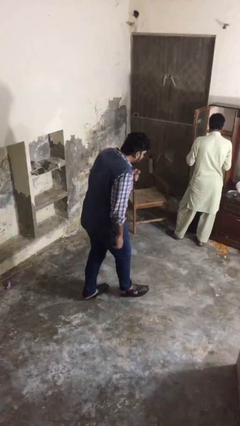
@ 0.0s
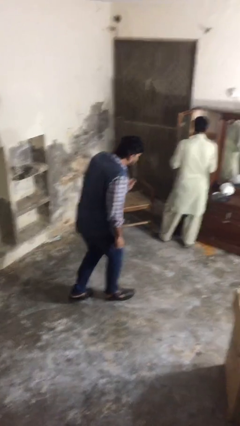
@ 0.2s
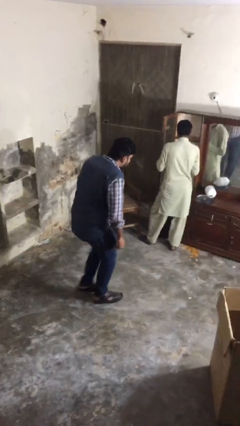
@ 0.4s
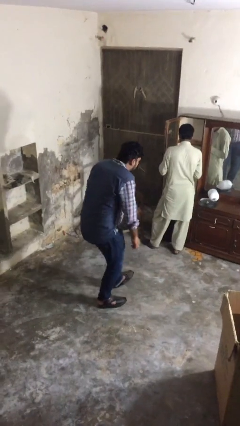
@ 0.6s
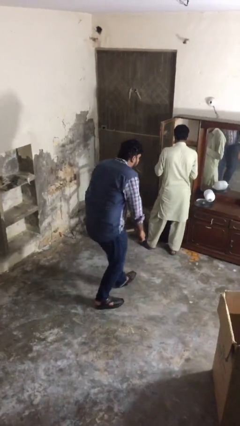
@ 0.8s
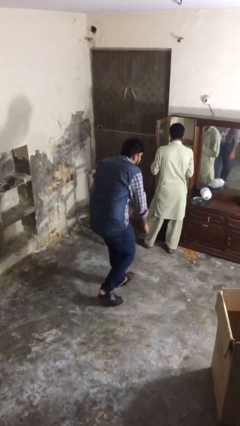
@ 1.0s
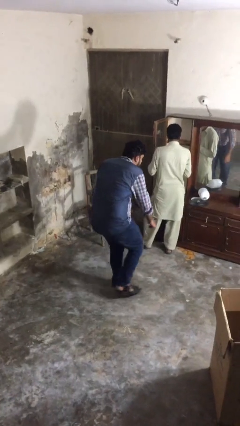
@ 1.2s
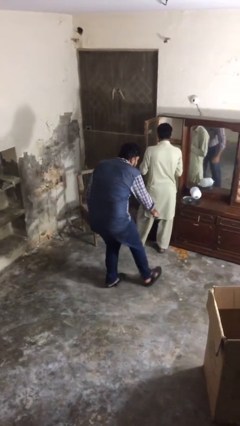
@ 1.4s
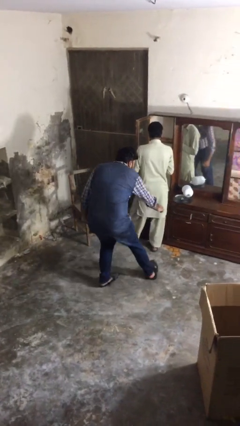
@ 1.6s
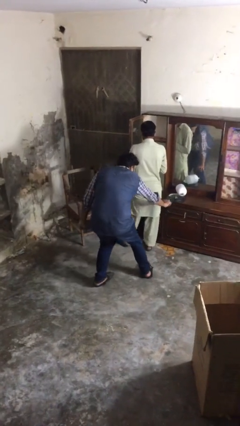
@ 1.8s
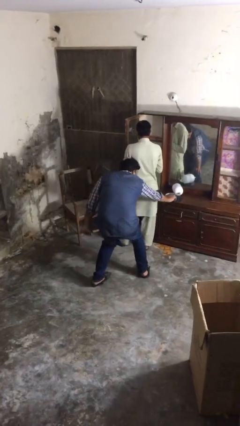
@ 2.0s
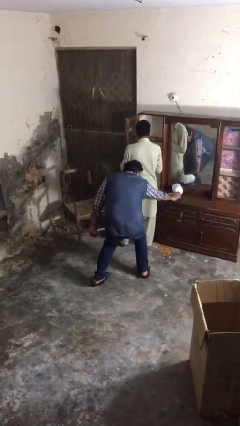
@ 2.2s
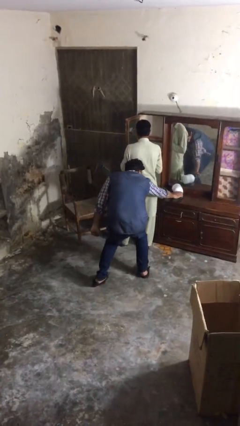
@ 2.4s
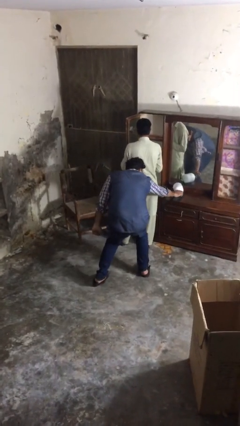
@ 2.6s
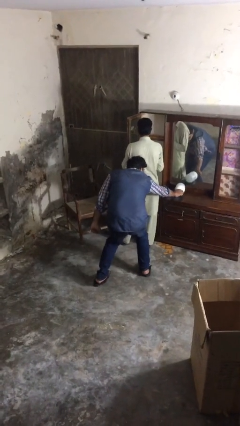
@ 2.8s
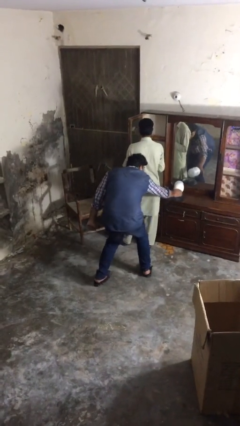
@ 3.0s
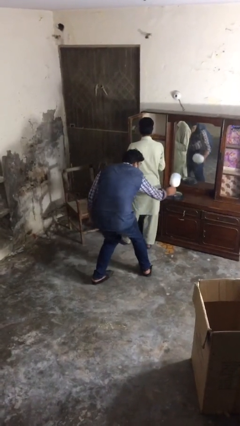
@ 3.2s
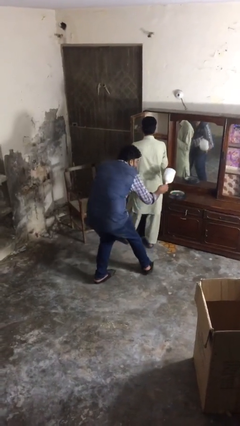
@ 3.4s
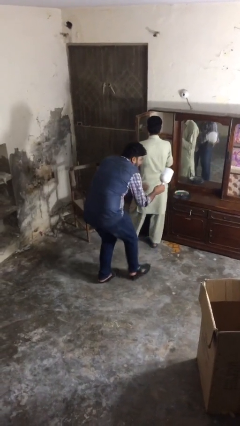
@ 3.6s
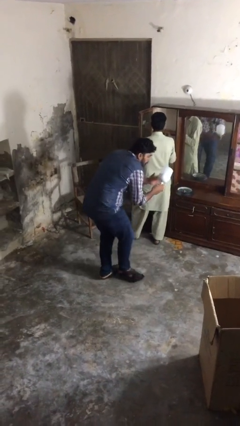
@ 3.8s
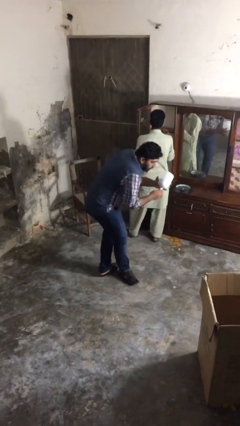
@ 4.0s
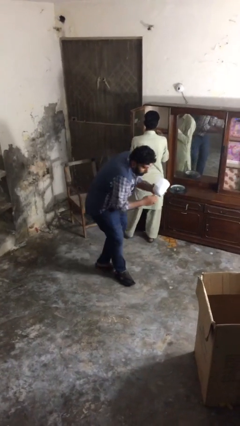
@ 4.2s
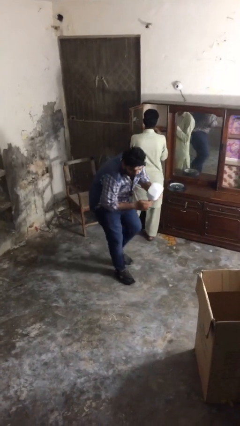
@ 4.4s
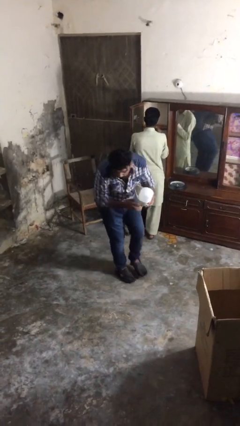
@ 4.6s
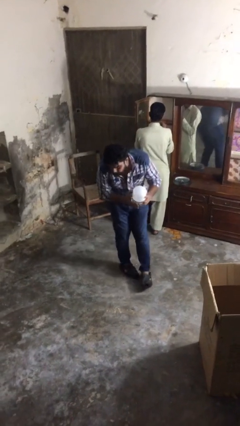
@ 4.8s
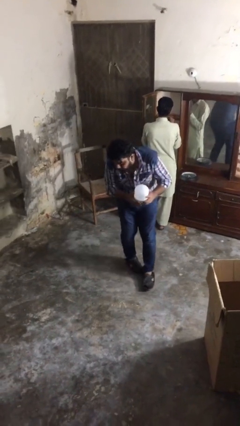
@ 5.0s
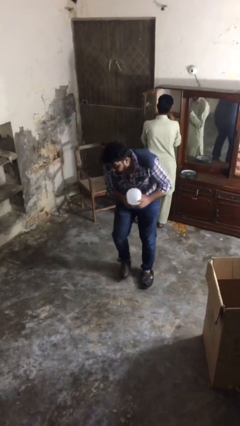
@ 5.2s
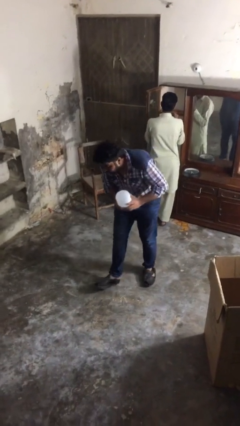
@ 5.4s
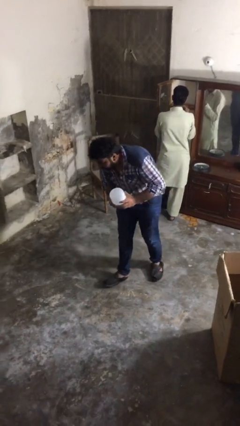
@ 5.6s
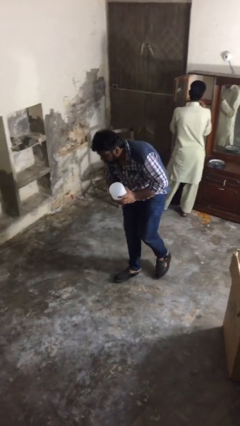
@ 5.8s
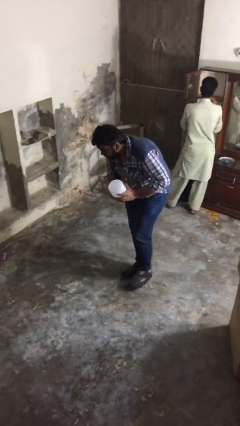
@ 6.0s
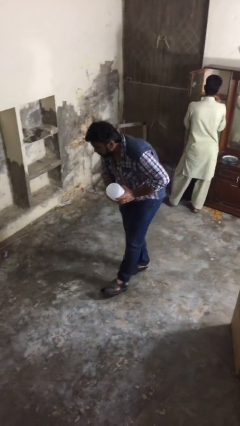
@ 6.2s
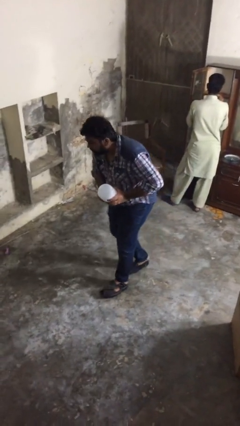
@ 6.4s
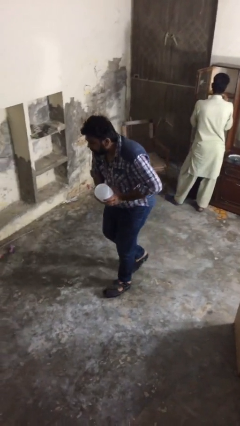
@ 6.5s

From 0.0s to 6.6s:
person steals object from person

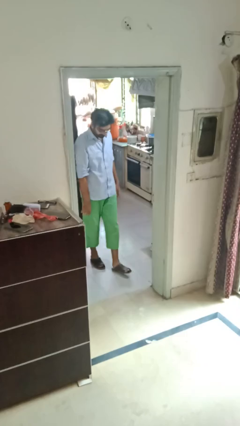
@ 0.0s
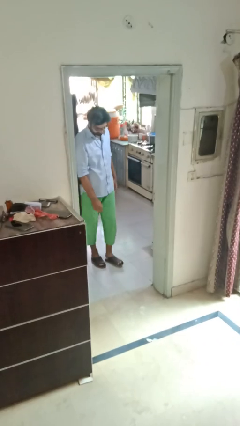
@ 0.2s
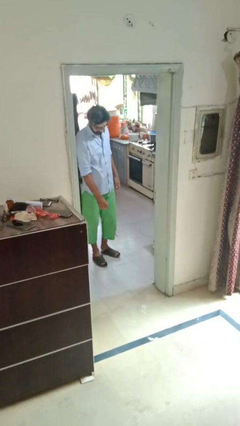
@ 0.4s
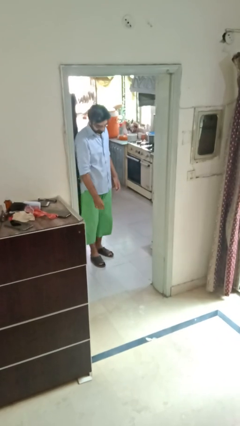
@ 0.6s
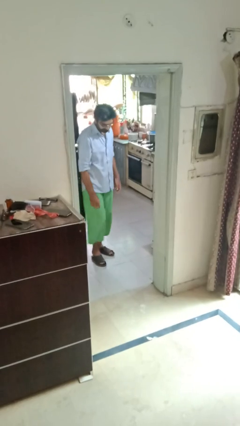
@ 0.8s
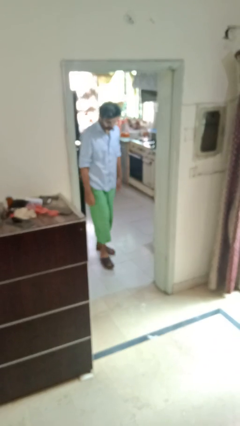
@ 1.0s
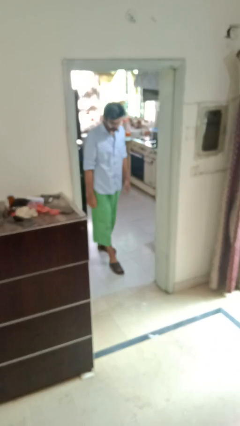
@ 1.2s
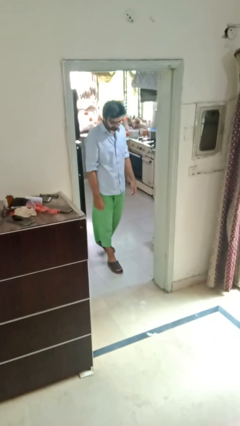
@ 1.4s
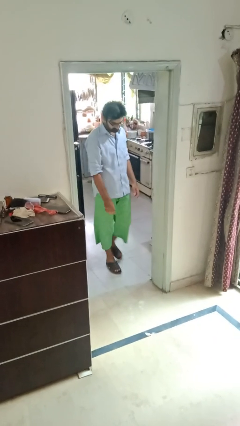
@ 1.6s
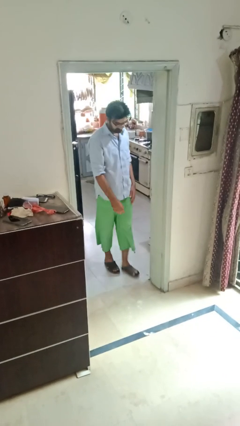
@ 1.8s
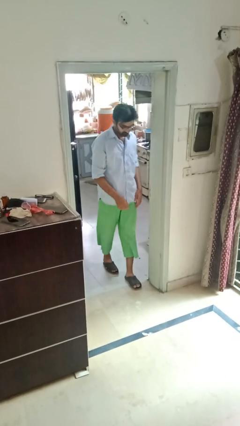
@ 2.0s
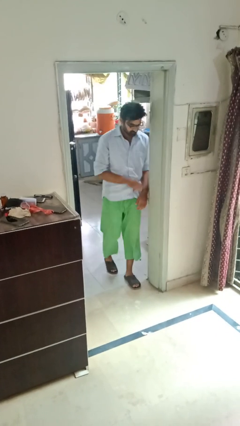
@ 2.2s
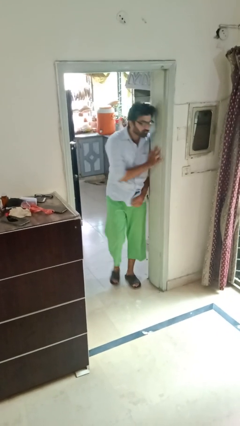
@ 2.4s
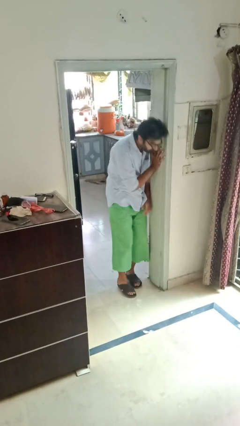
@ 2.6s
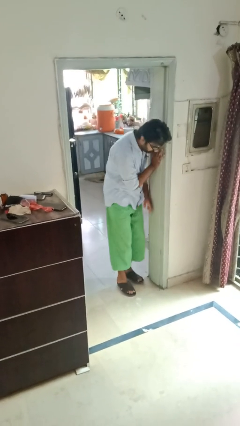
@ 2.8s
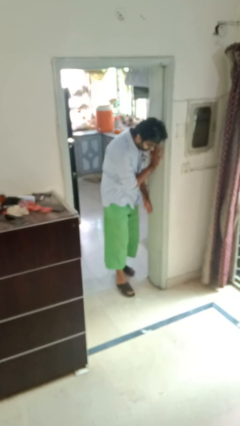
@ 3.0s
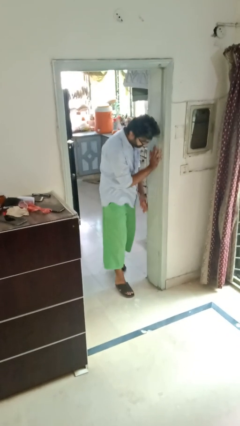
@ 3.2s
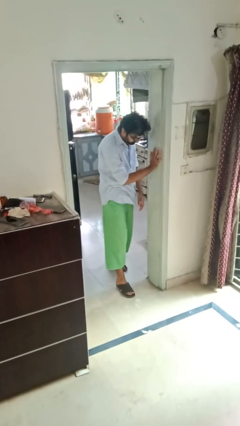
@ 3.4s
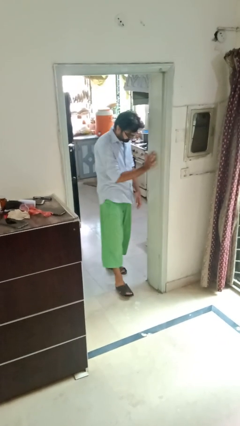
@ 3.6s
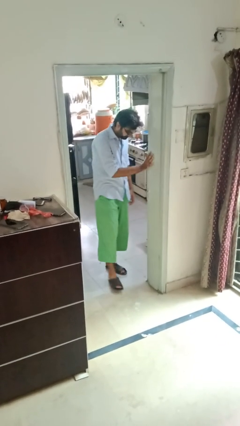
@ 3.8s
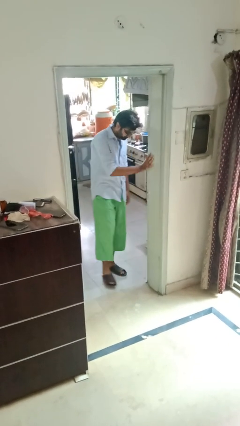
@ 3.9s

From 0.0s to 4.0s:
person bumps into wall

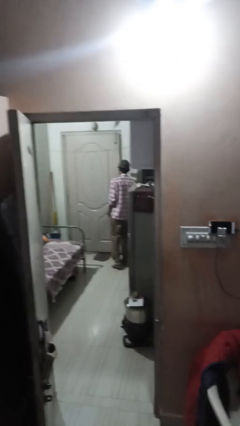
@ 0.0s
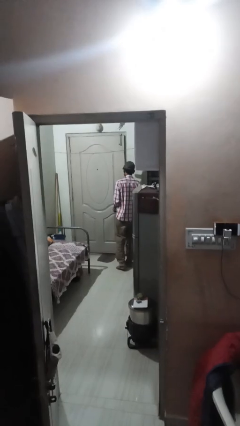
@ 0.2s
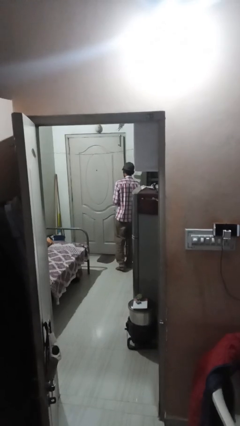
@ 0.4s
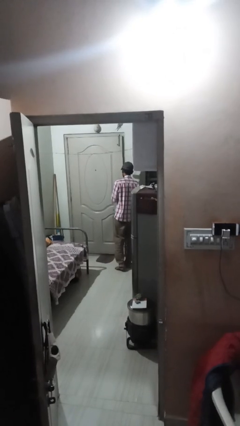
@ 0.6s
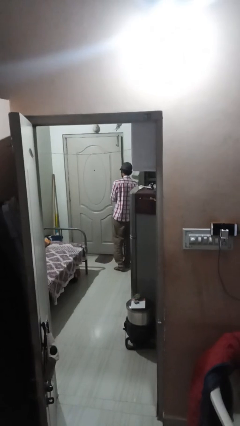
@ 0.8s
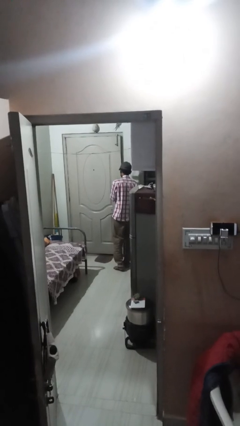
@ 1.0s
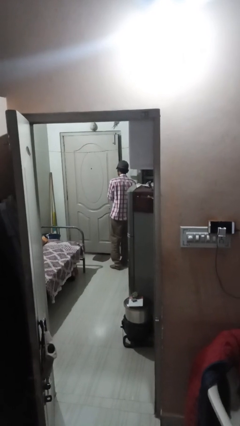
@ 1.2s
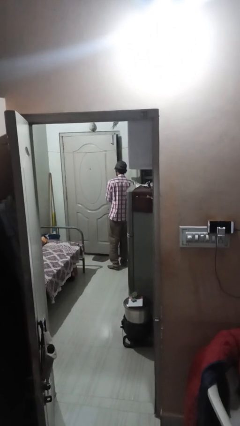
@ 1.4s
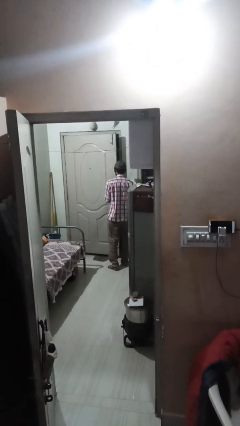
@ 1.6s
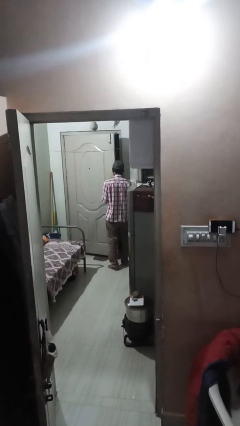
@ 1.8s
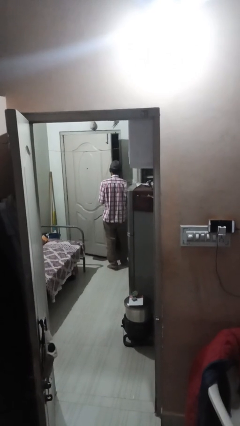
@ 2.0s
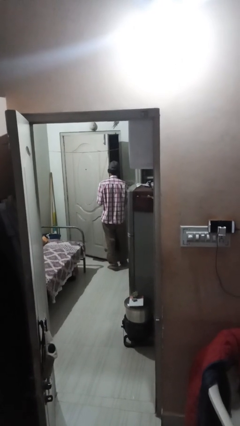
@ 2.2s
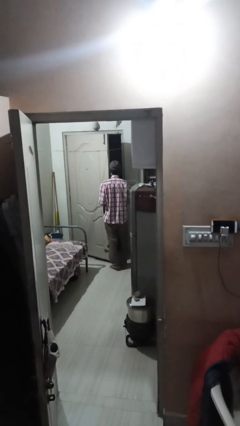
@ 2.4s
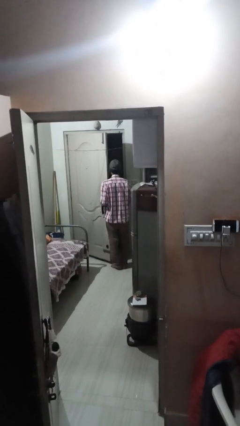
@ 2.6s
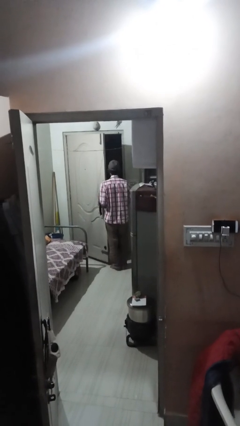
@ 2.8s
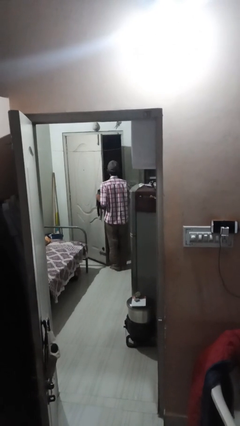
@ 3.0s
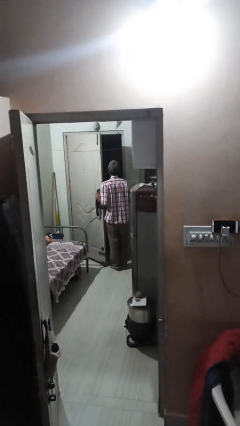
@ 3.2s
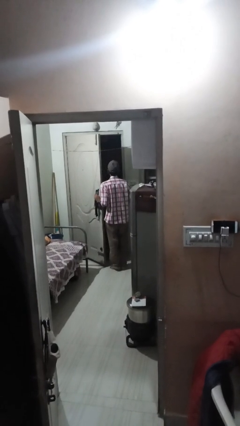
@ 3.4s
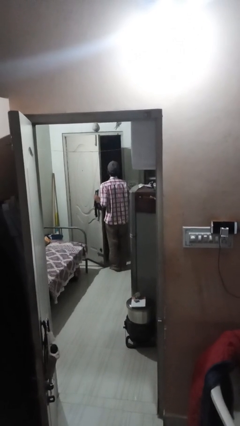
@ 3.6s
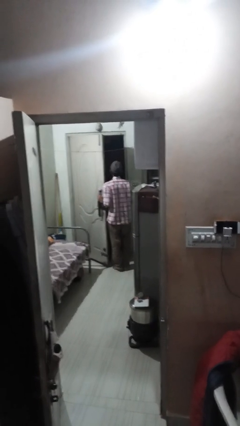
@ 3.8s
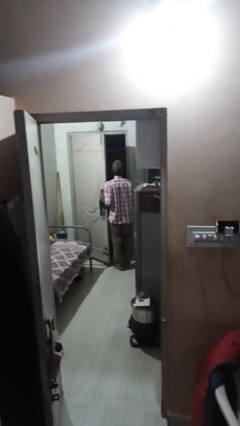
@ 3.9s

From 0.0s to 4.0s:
person opens facility door

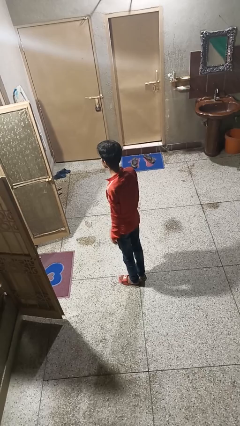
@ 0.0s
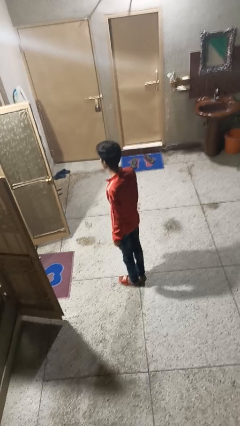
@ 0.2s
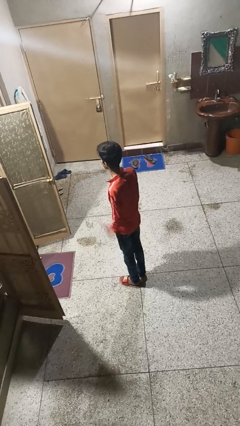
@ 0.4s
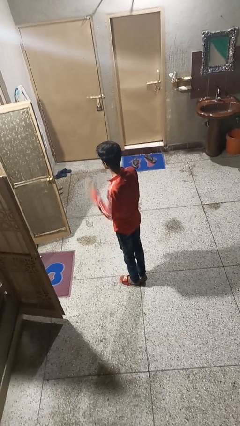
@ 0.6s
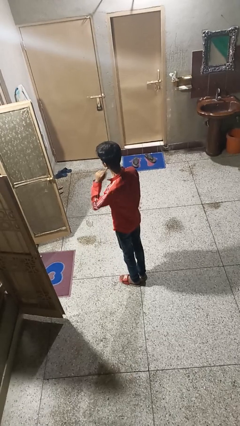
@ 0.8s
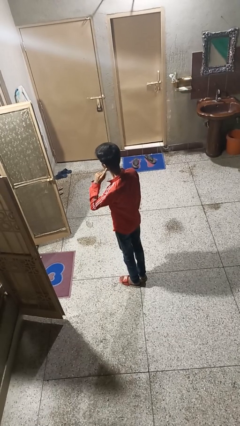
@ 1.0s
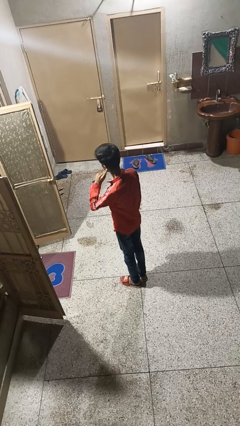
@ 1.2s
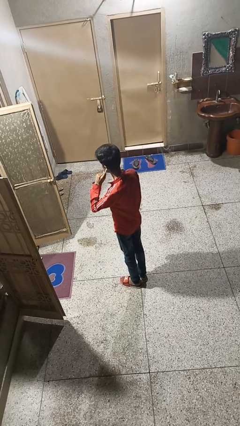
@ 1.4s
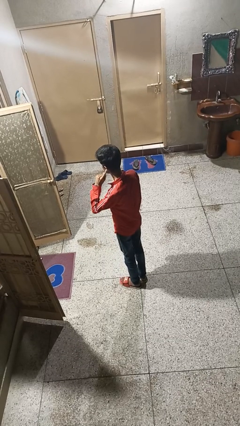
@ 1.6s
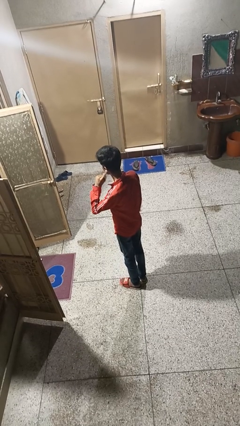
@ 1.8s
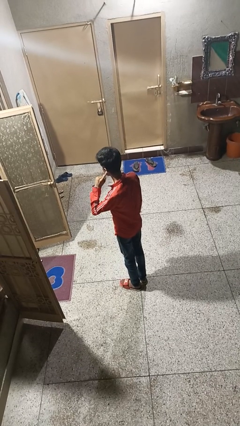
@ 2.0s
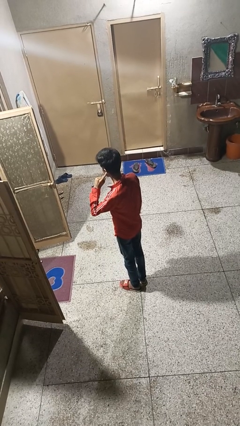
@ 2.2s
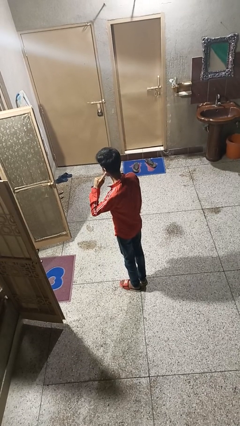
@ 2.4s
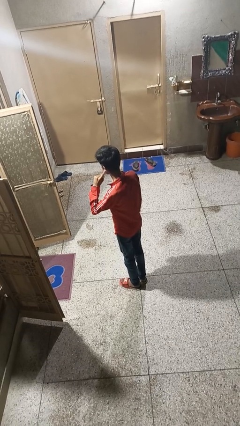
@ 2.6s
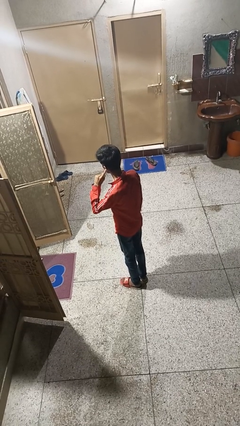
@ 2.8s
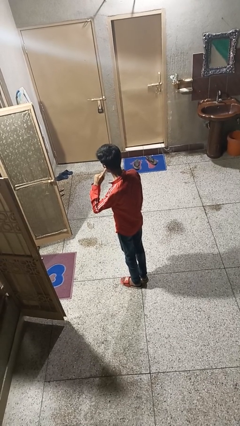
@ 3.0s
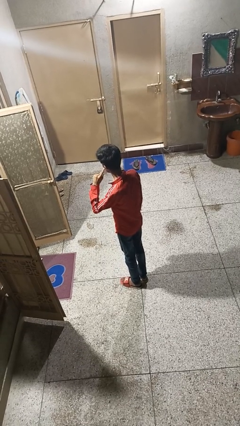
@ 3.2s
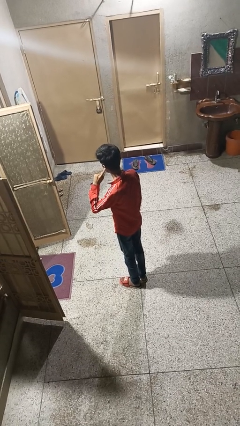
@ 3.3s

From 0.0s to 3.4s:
person gestures listen closely
